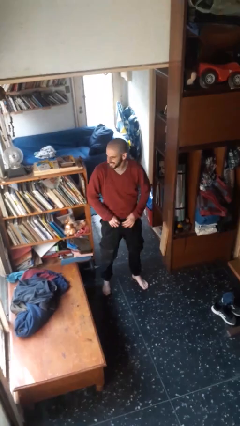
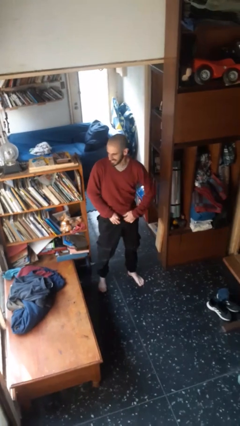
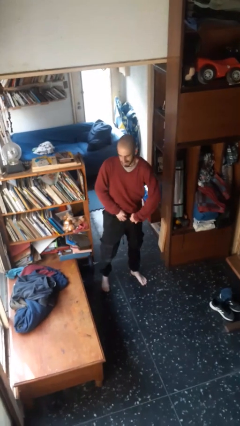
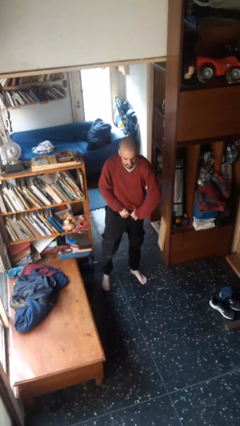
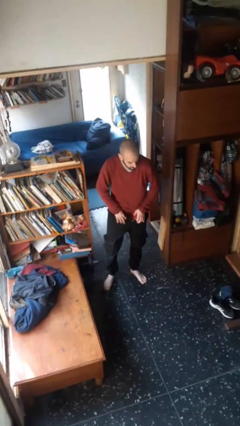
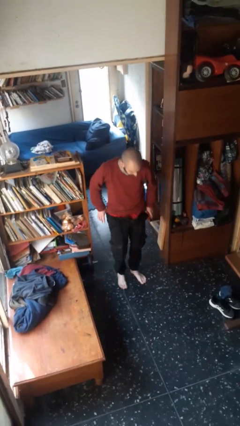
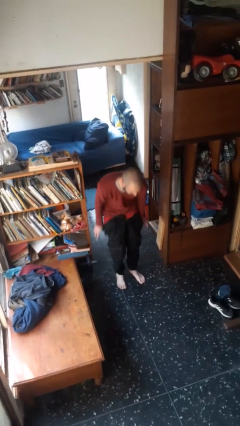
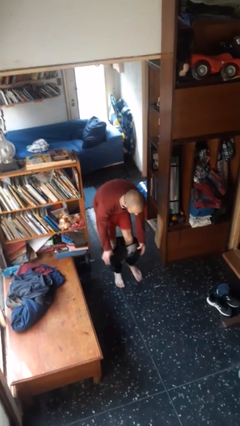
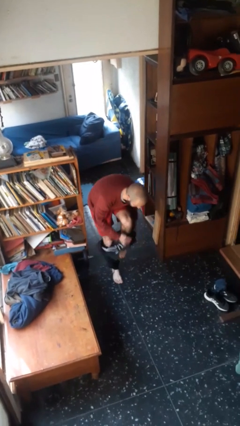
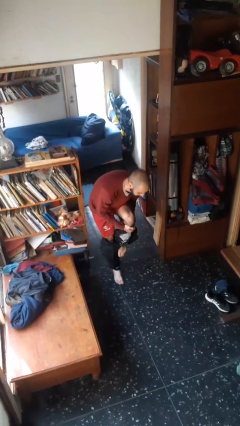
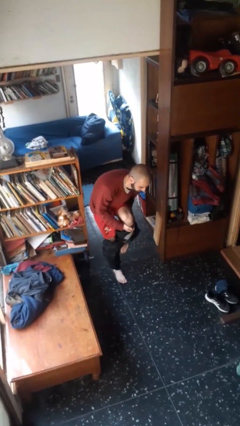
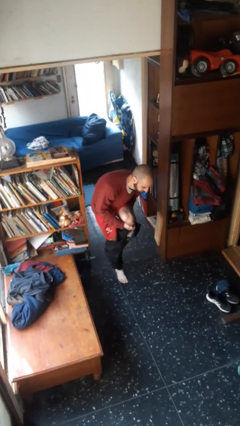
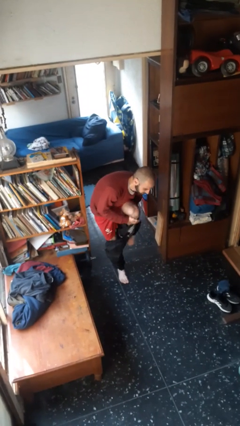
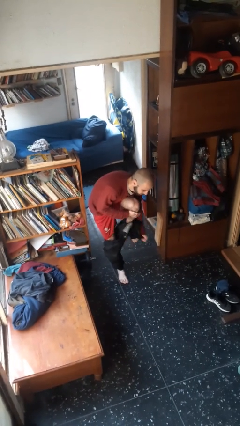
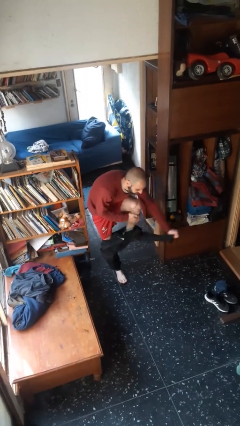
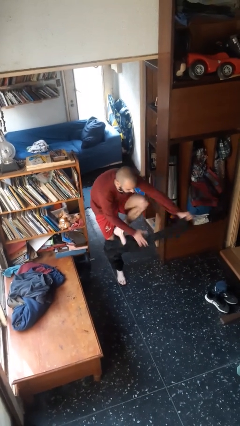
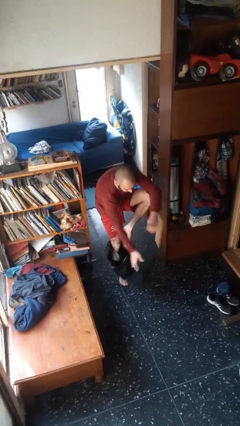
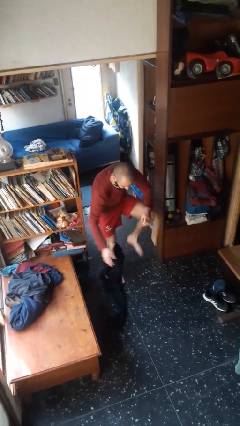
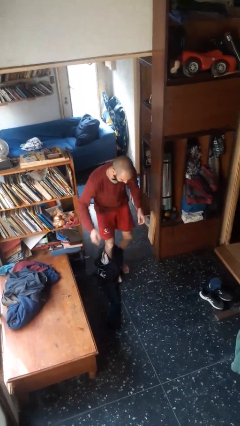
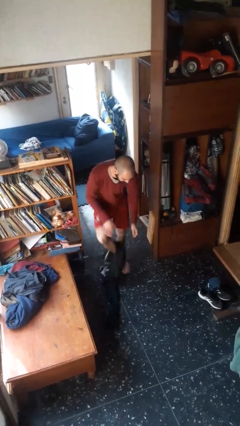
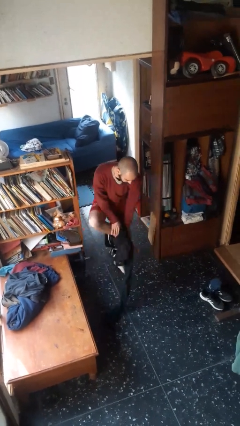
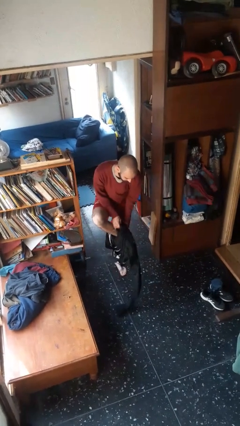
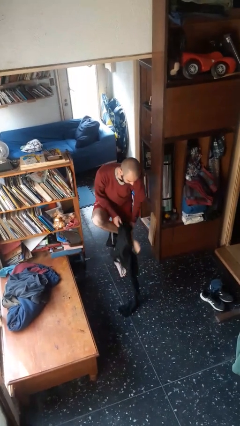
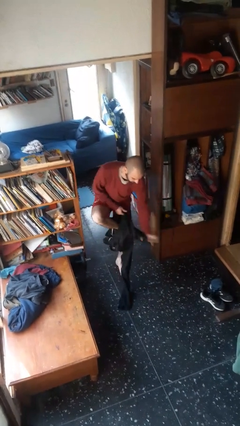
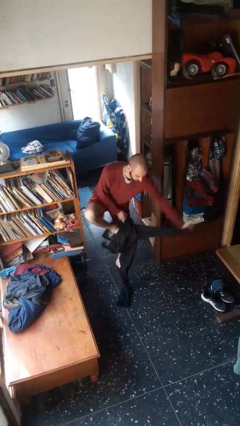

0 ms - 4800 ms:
person takes off pants

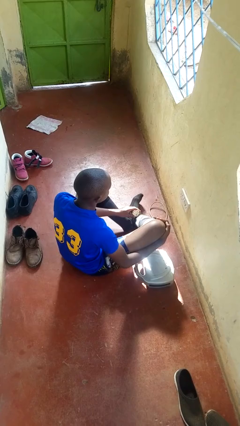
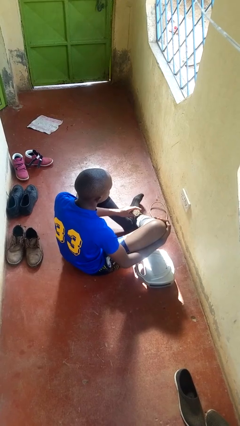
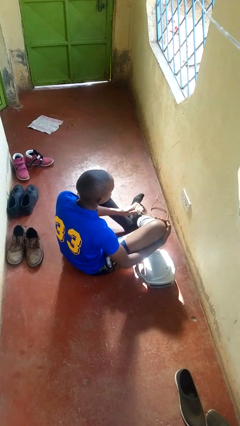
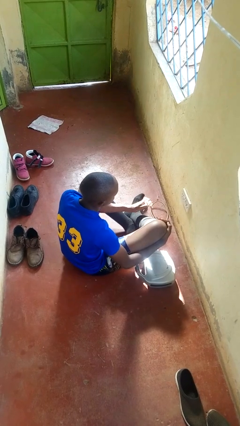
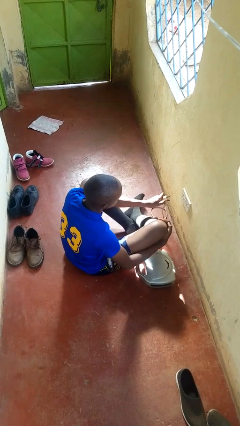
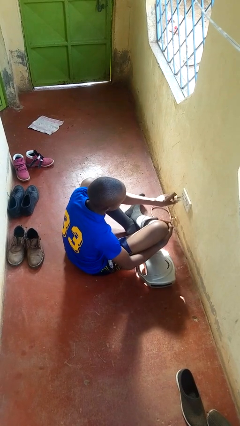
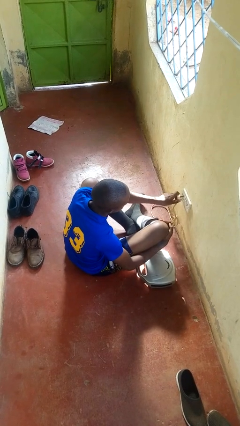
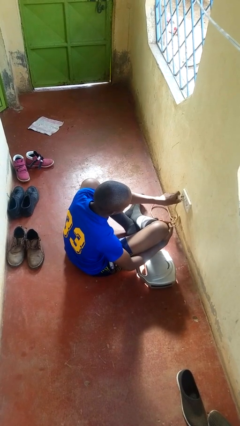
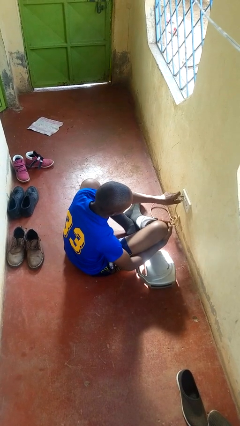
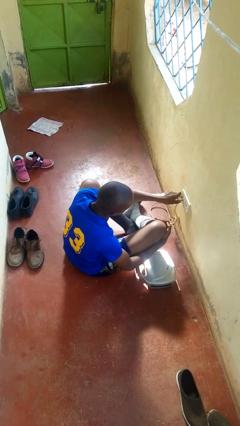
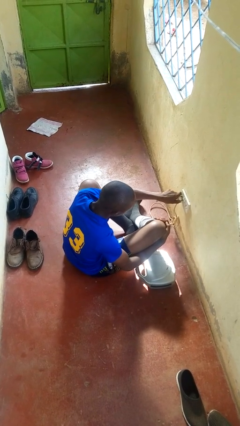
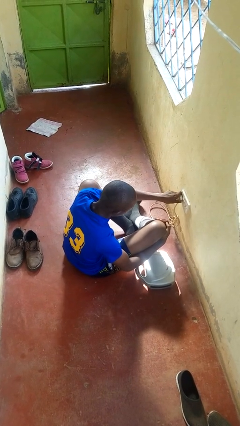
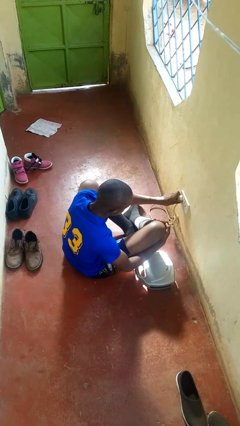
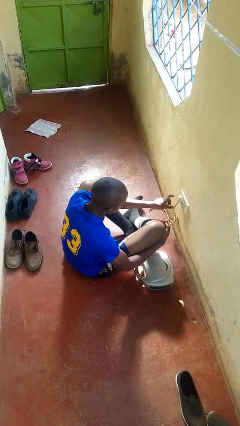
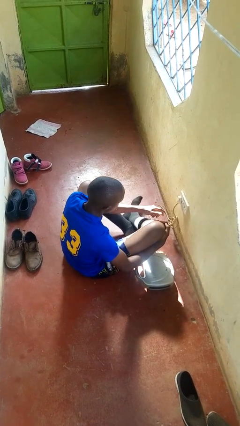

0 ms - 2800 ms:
person plugs into electrical socket

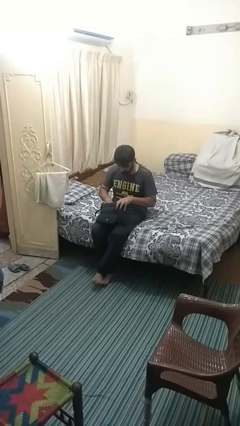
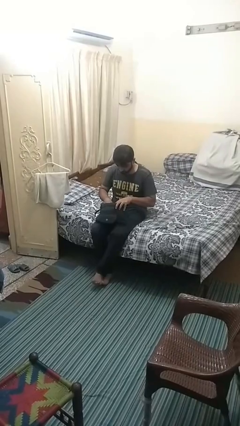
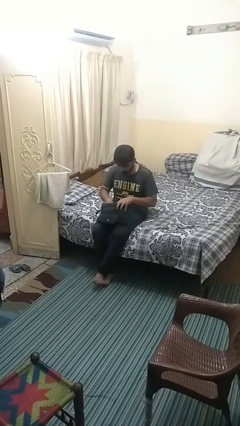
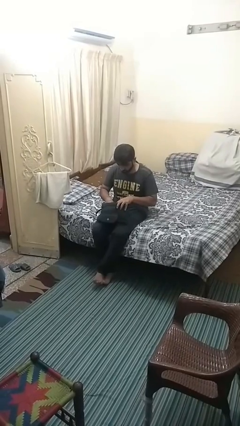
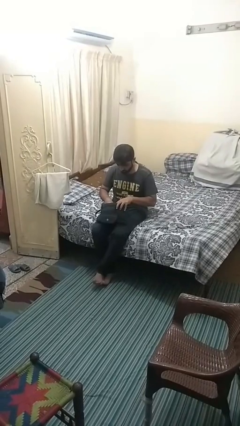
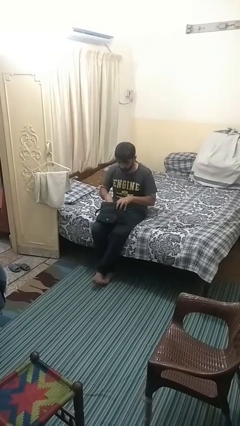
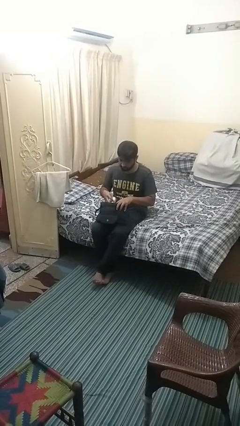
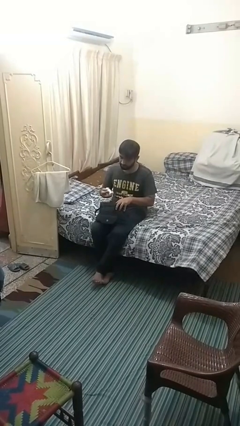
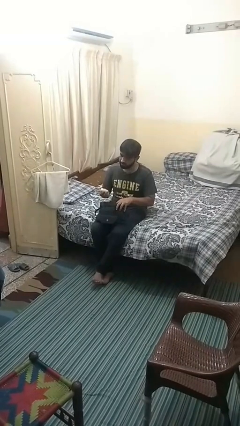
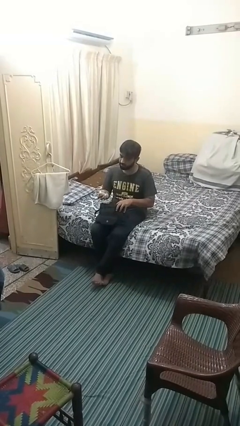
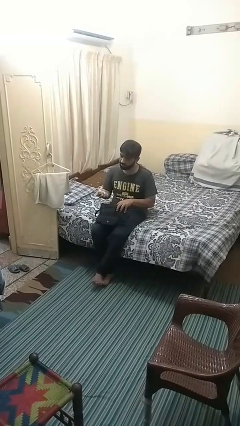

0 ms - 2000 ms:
person takes object from purse

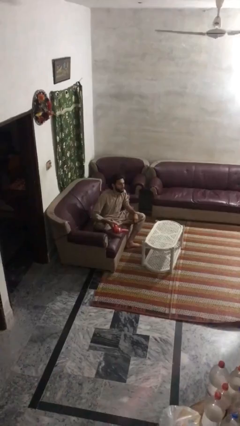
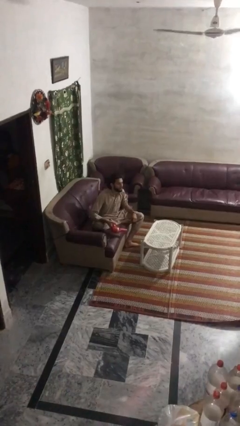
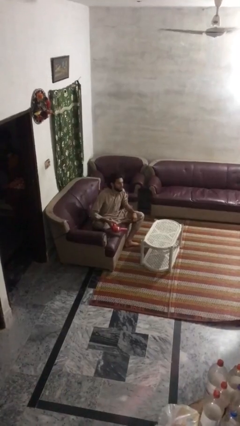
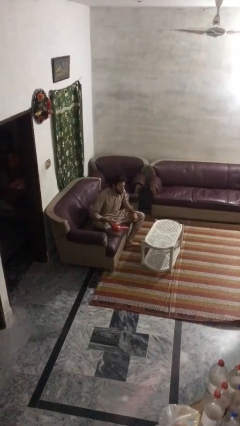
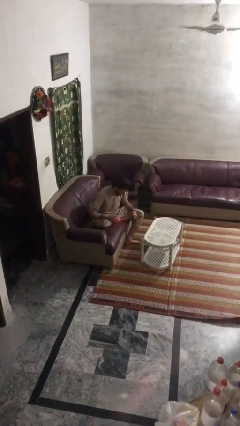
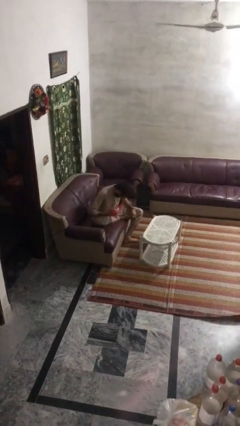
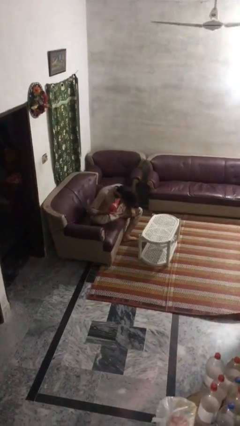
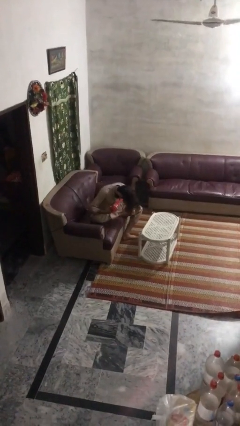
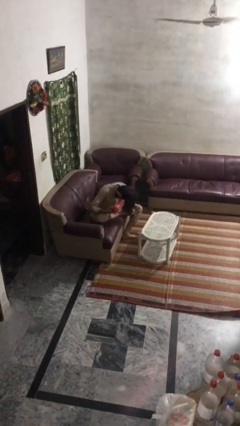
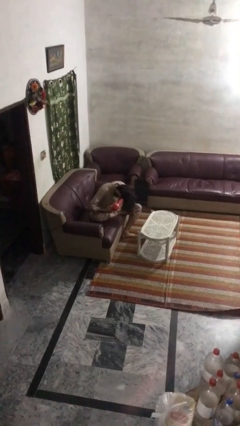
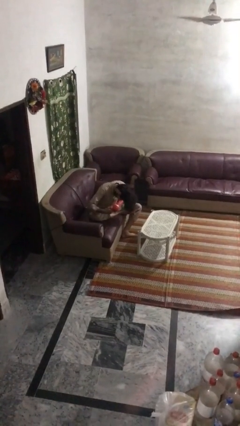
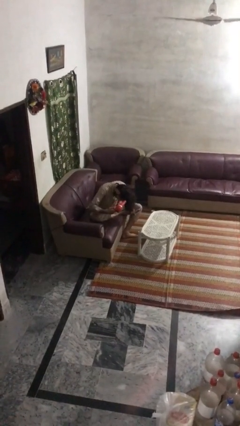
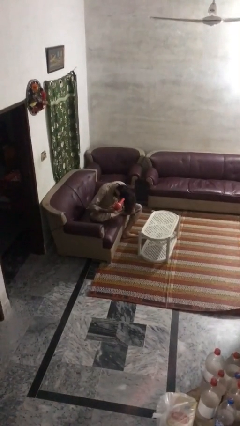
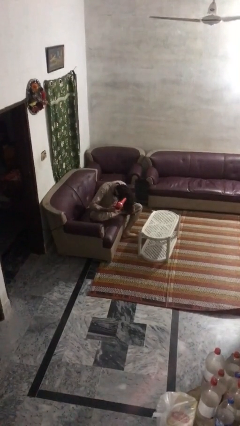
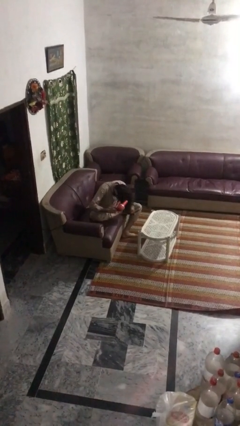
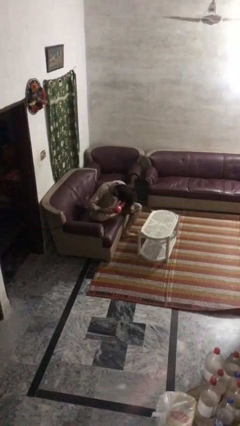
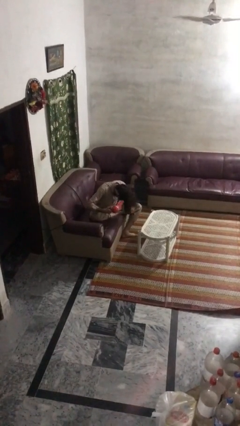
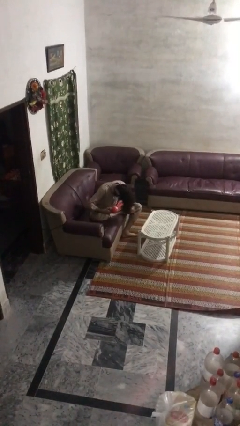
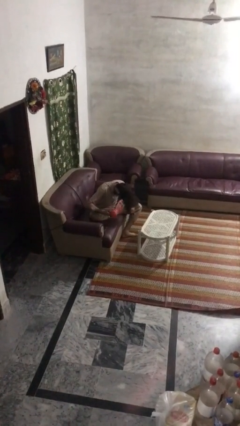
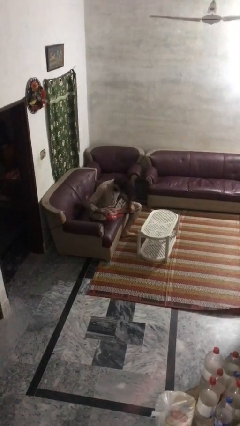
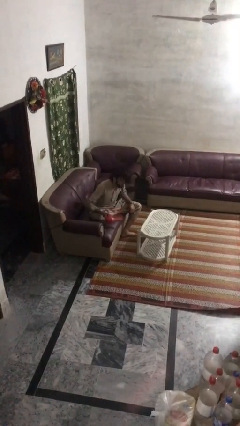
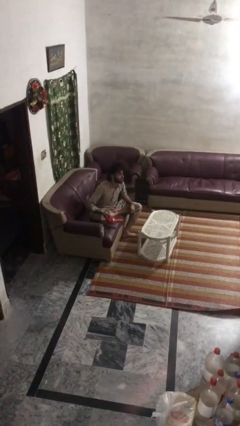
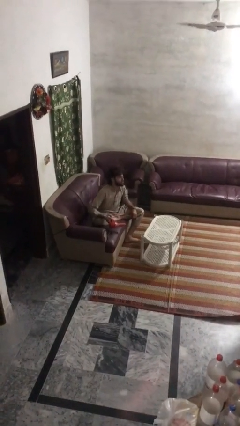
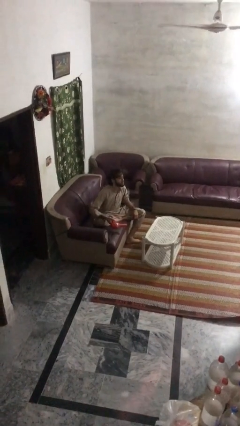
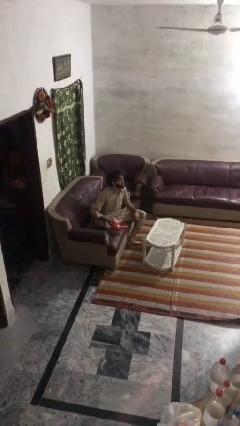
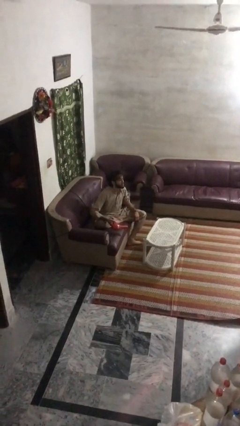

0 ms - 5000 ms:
person dries hair with hairdryer

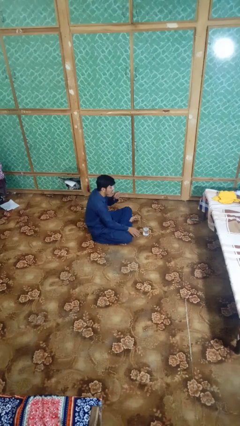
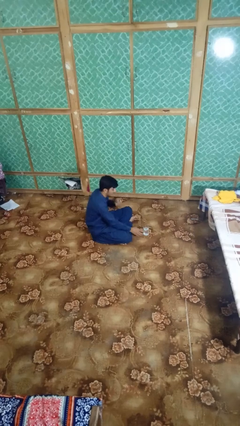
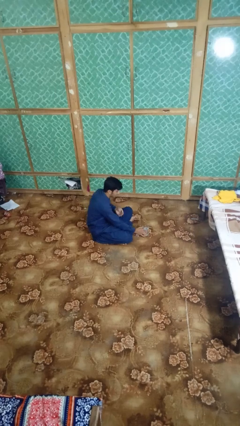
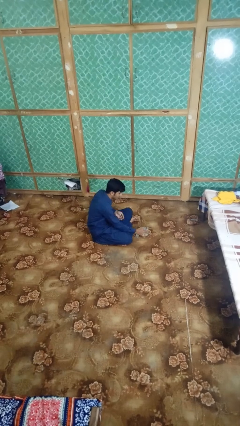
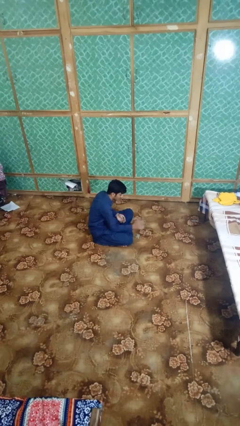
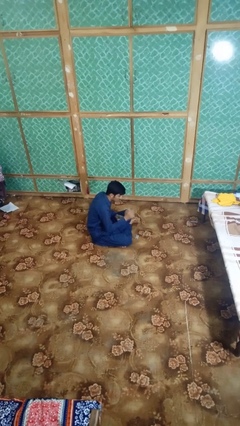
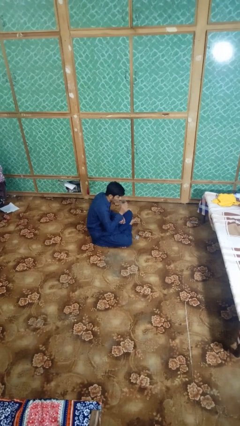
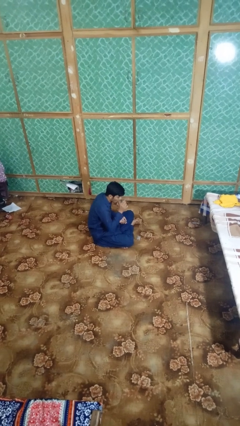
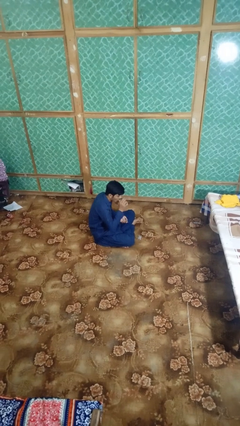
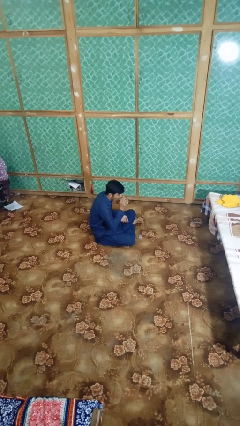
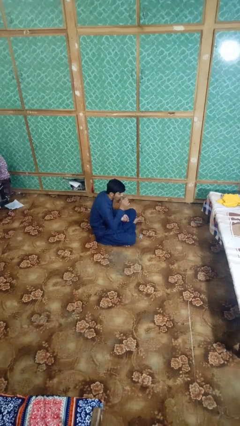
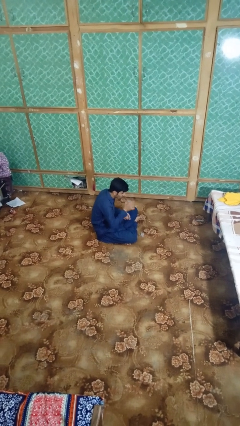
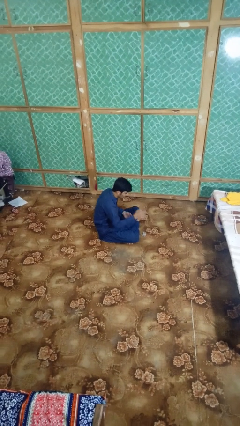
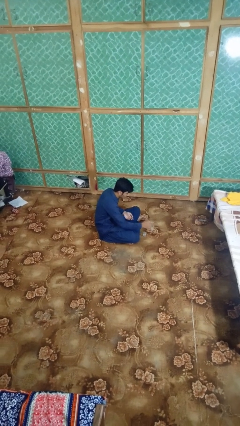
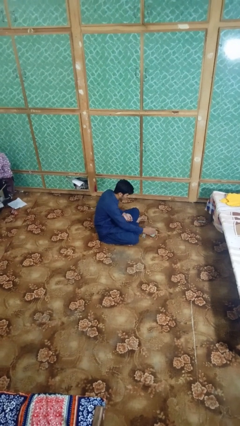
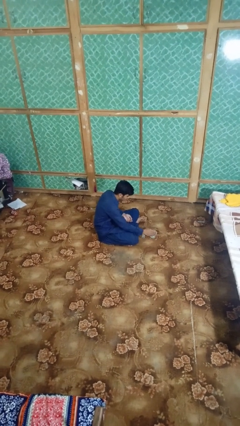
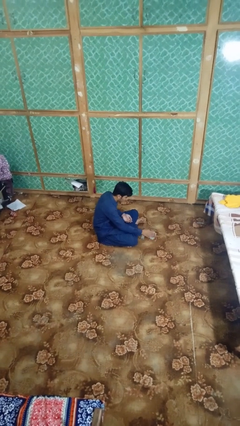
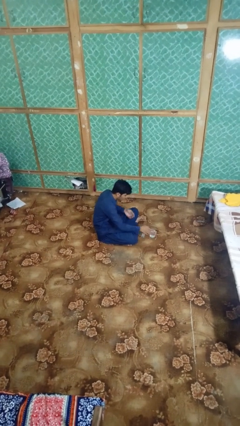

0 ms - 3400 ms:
person drinks from cup
